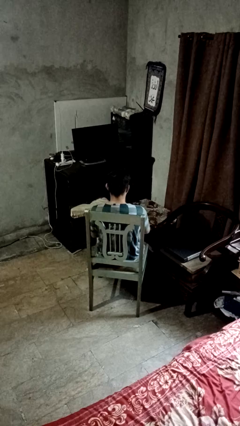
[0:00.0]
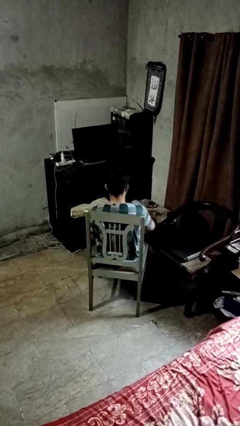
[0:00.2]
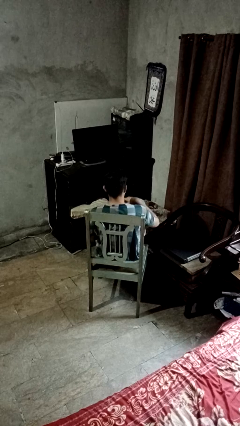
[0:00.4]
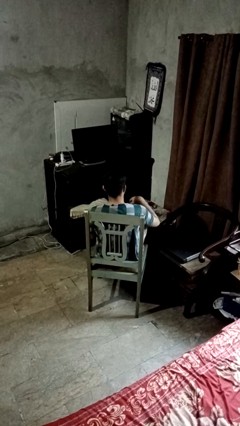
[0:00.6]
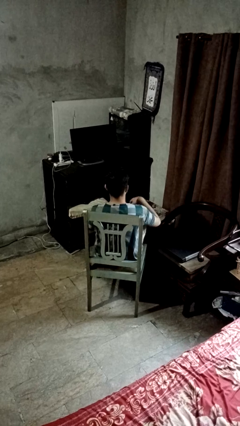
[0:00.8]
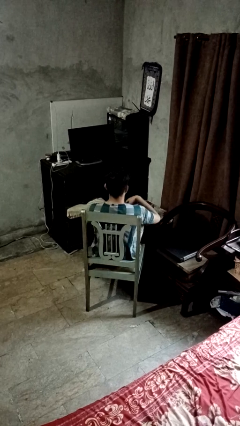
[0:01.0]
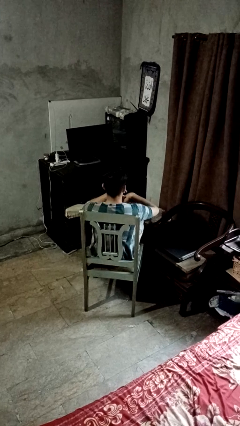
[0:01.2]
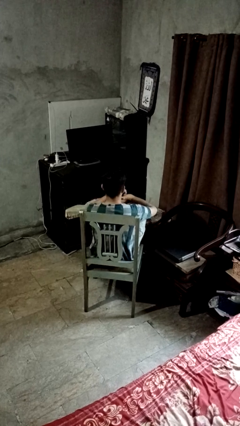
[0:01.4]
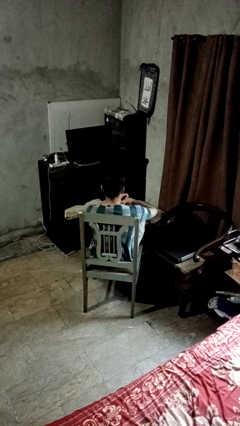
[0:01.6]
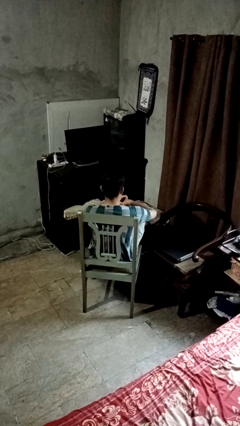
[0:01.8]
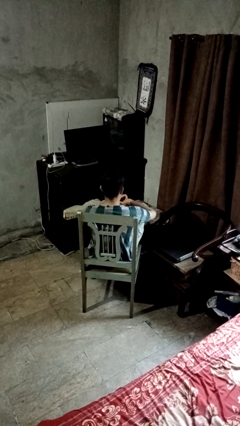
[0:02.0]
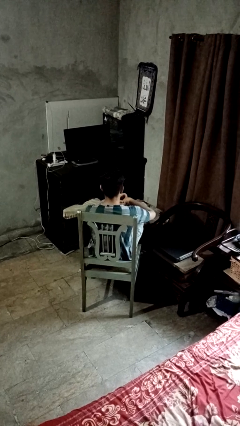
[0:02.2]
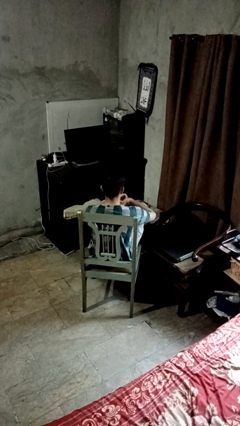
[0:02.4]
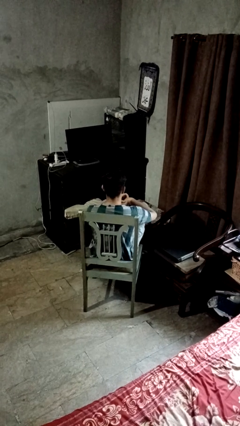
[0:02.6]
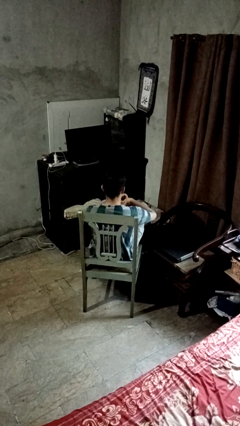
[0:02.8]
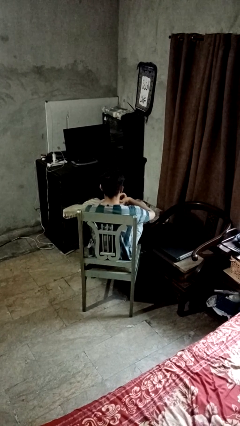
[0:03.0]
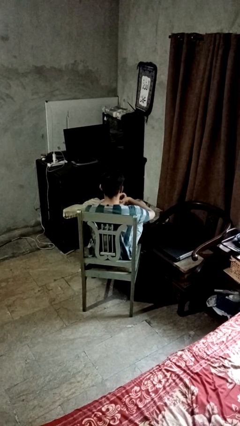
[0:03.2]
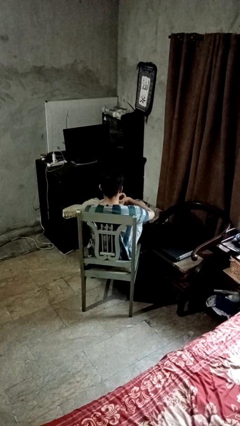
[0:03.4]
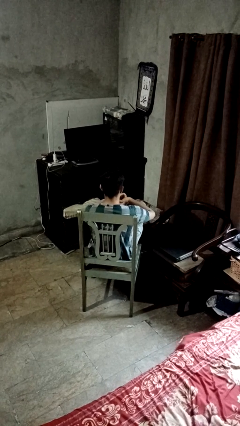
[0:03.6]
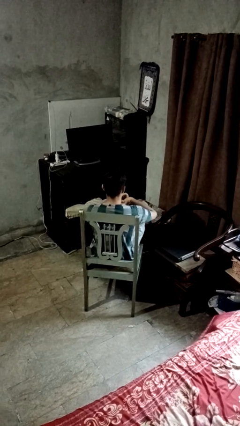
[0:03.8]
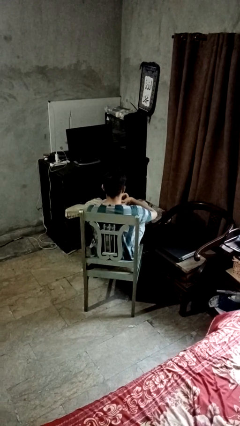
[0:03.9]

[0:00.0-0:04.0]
person puts feet up

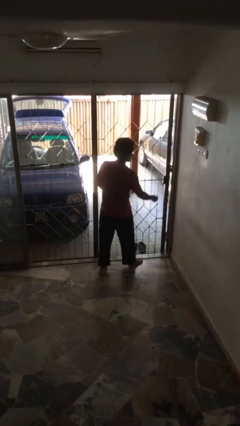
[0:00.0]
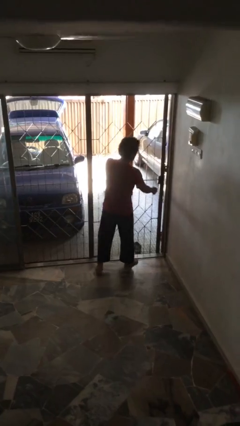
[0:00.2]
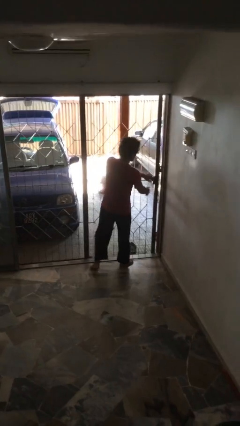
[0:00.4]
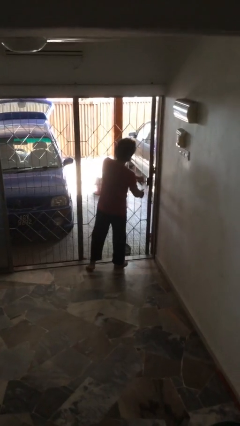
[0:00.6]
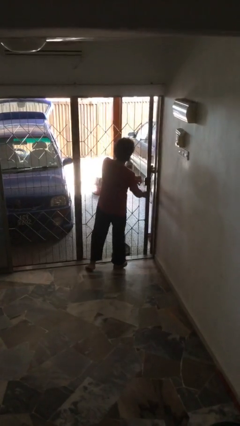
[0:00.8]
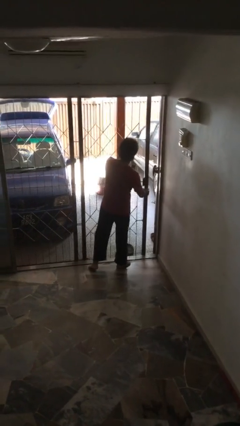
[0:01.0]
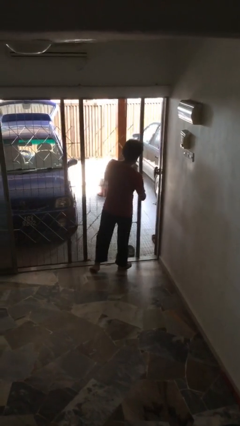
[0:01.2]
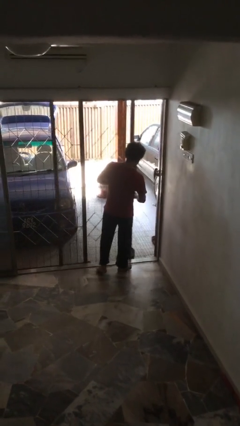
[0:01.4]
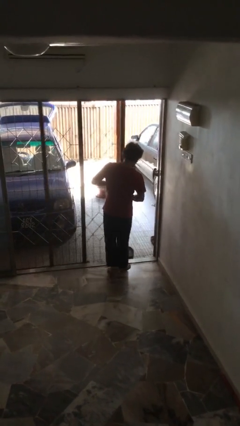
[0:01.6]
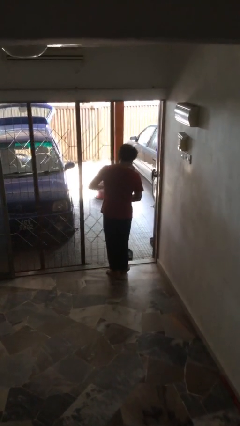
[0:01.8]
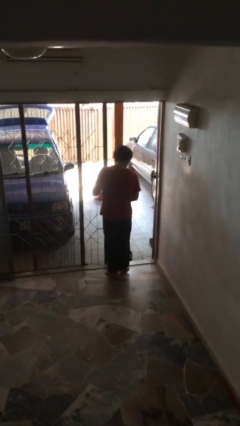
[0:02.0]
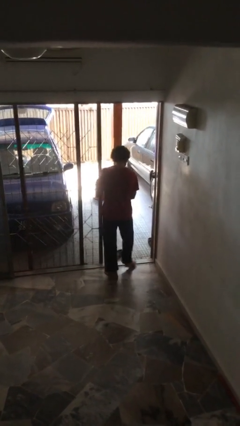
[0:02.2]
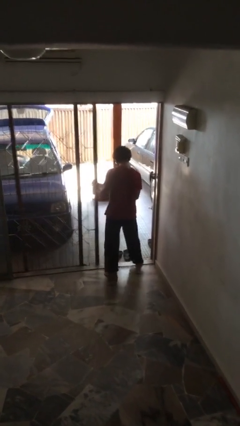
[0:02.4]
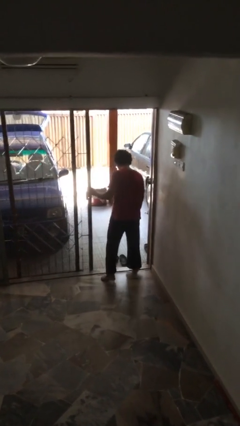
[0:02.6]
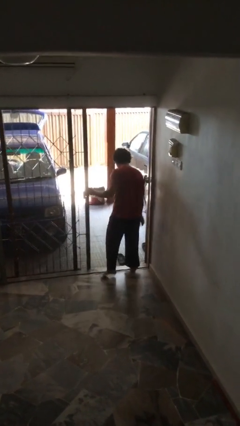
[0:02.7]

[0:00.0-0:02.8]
person opens facility door

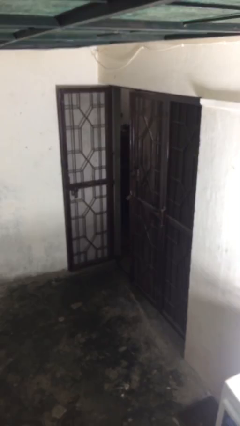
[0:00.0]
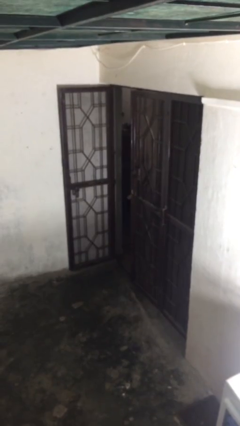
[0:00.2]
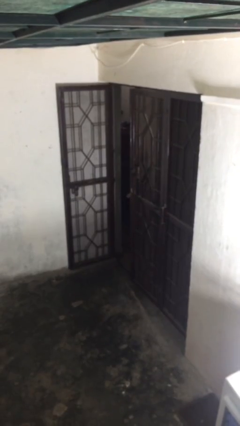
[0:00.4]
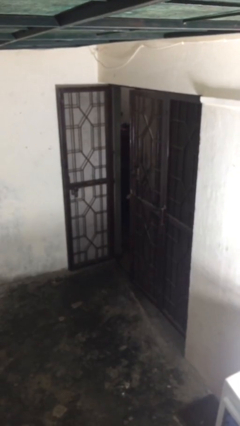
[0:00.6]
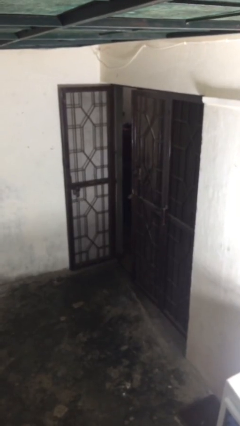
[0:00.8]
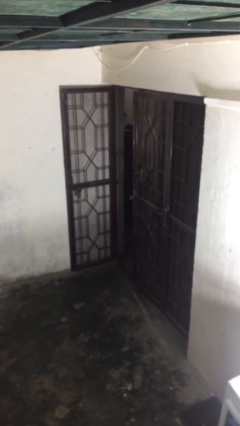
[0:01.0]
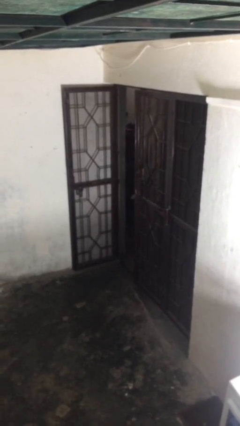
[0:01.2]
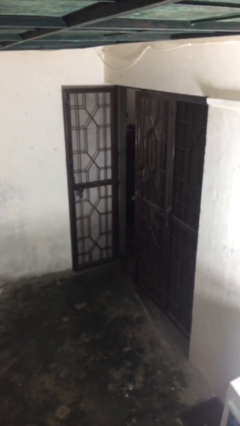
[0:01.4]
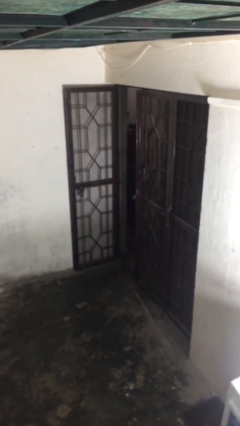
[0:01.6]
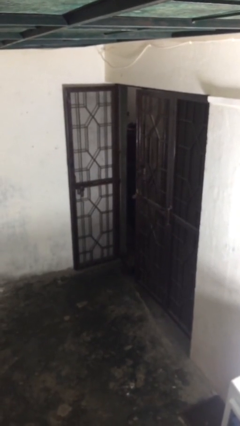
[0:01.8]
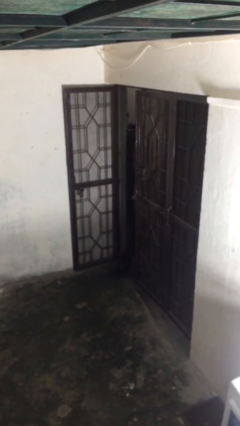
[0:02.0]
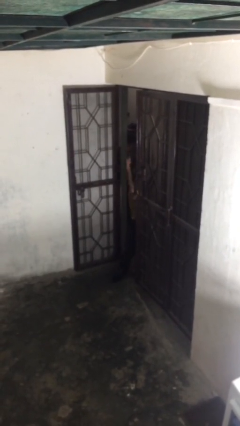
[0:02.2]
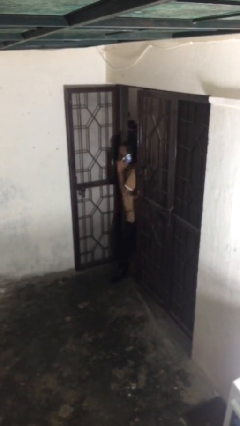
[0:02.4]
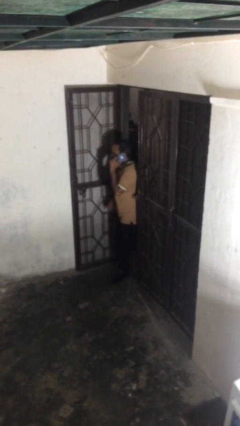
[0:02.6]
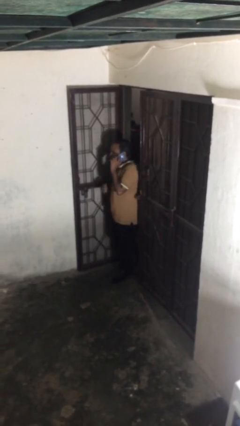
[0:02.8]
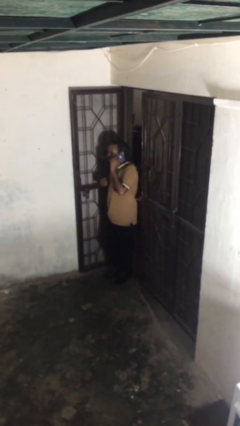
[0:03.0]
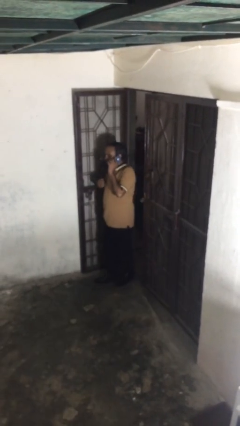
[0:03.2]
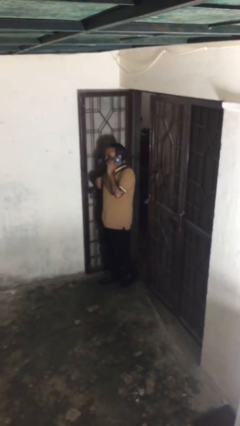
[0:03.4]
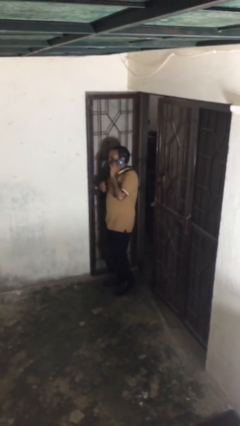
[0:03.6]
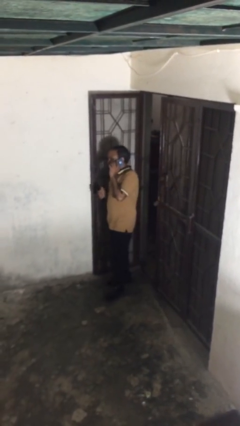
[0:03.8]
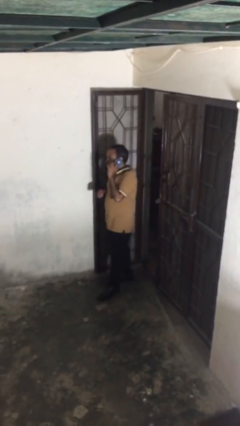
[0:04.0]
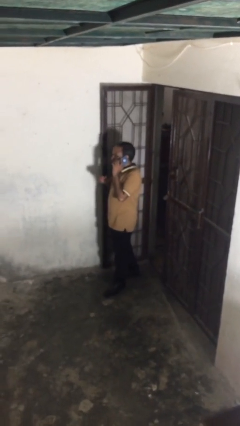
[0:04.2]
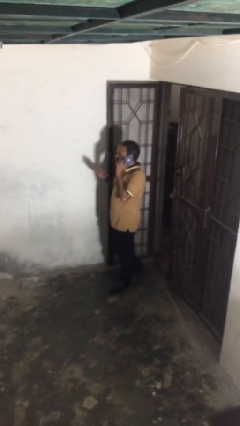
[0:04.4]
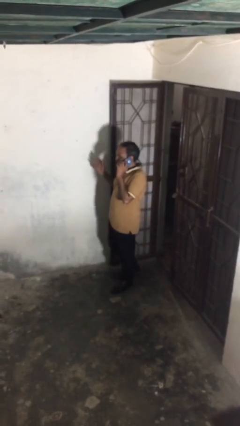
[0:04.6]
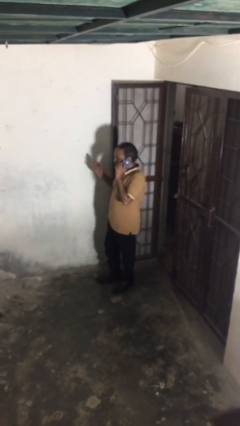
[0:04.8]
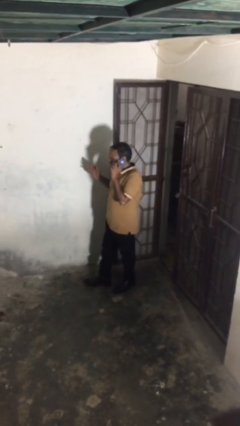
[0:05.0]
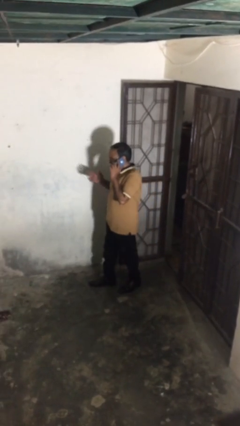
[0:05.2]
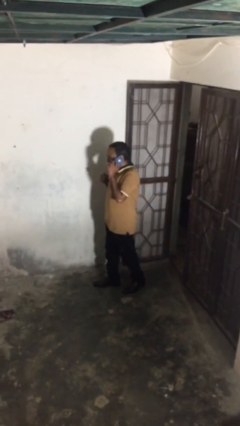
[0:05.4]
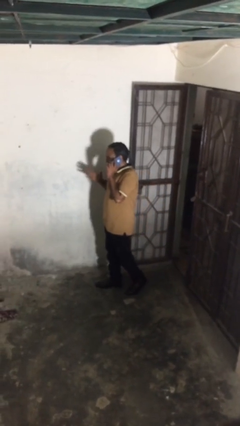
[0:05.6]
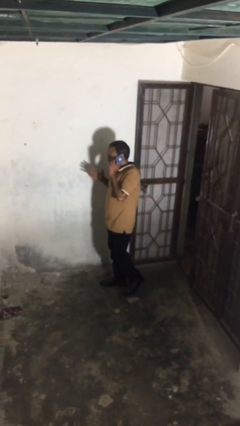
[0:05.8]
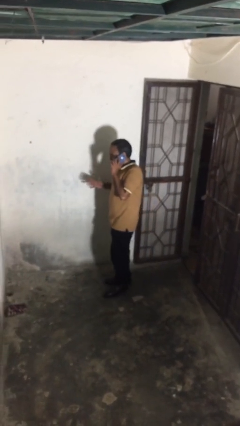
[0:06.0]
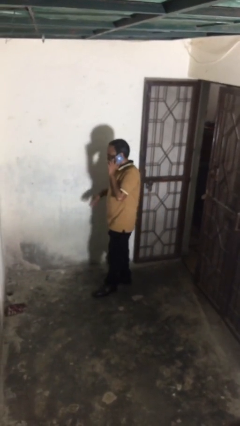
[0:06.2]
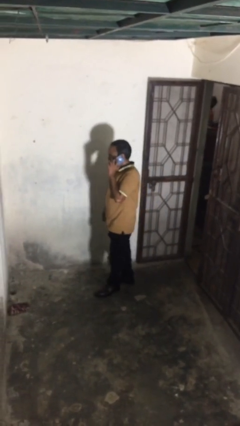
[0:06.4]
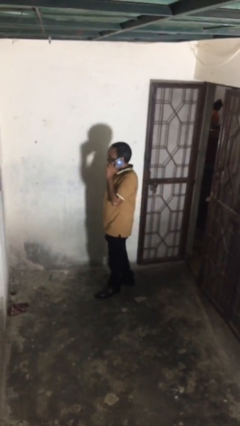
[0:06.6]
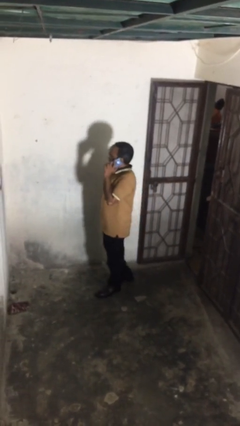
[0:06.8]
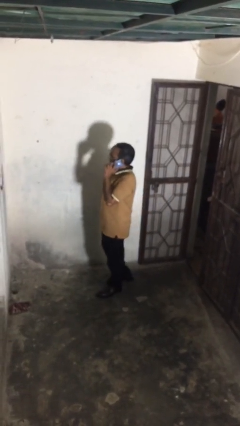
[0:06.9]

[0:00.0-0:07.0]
person enters scene through structure

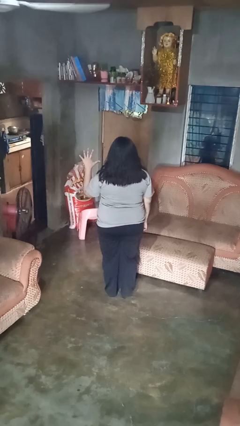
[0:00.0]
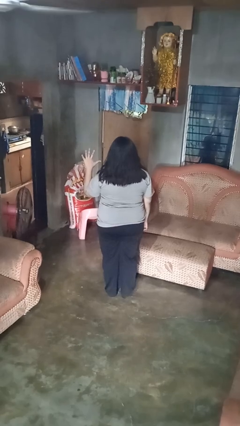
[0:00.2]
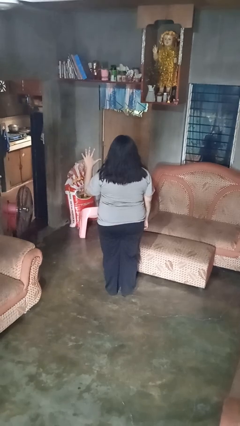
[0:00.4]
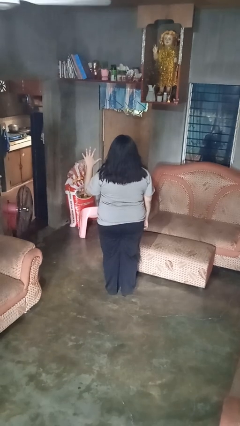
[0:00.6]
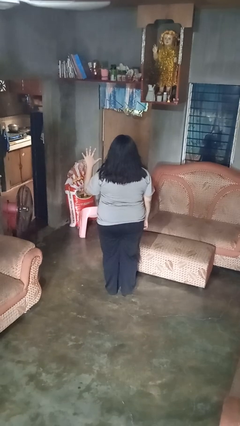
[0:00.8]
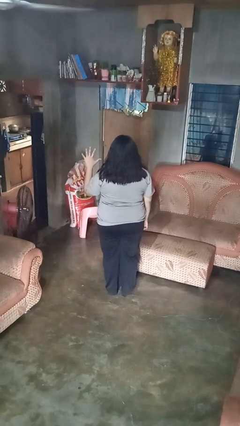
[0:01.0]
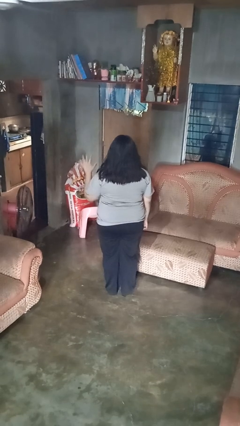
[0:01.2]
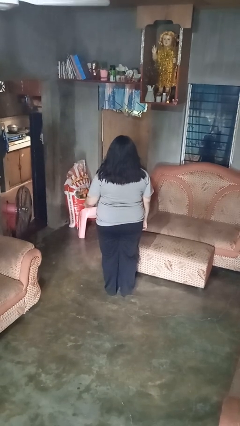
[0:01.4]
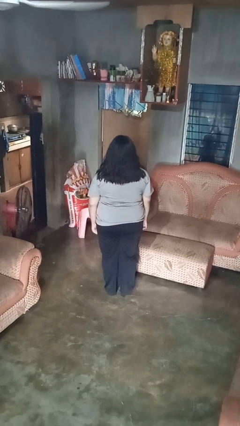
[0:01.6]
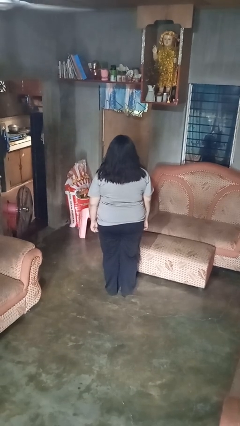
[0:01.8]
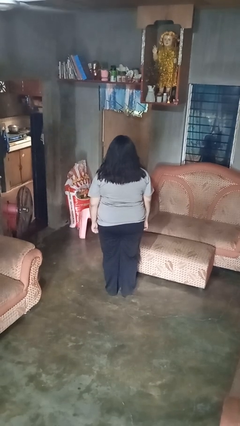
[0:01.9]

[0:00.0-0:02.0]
person gestures number five

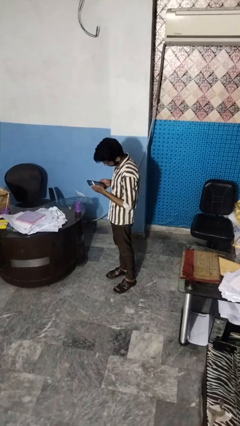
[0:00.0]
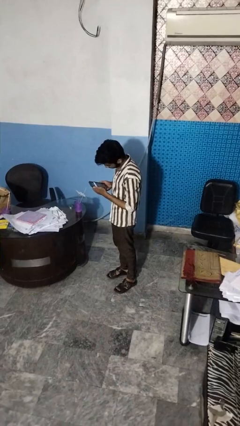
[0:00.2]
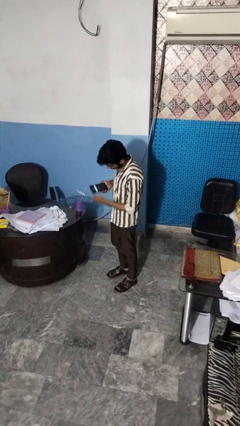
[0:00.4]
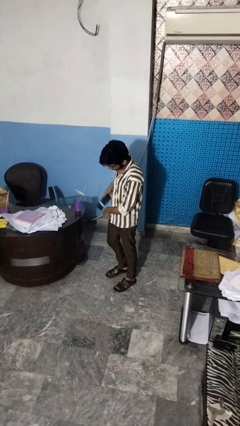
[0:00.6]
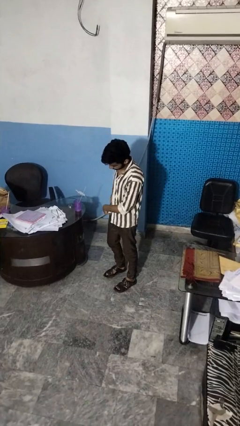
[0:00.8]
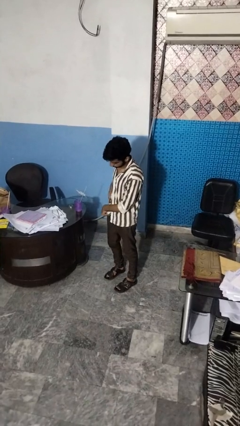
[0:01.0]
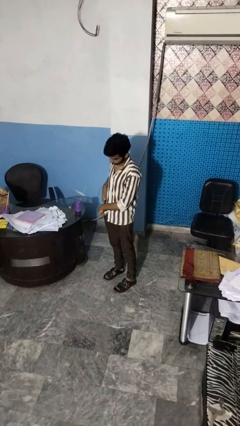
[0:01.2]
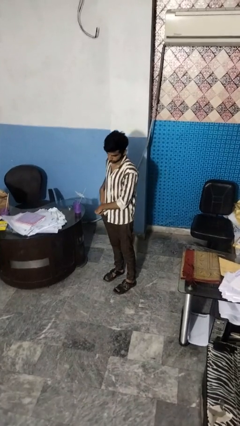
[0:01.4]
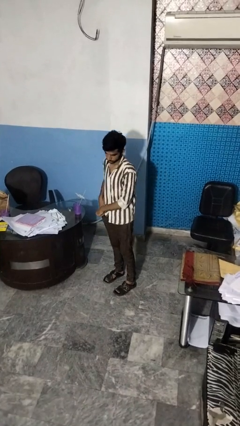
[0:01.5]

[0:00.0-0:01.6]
person puts phone into pocket

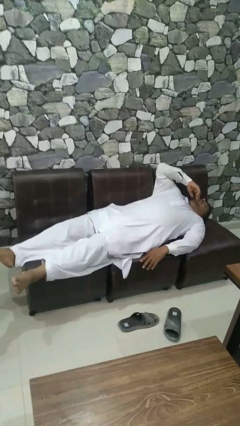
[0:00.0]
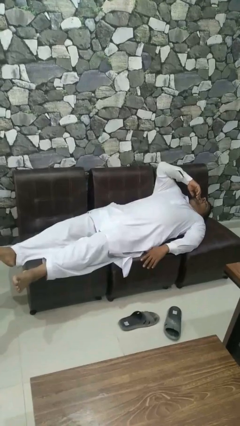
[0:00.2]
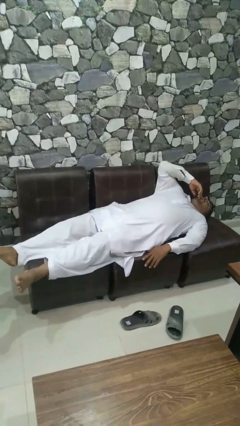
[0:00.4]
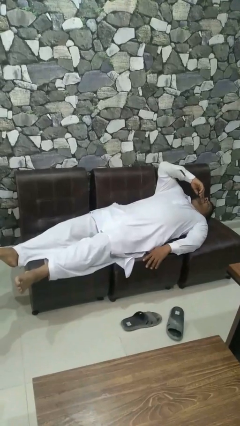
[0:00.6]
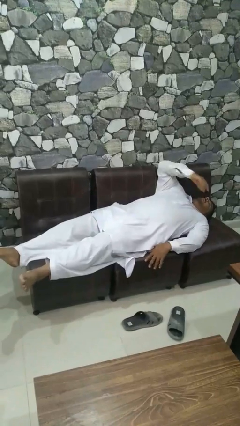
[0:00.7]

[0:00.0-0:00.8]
person stands up
